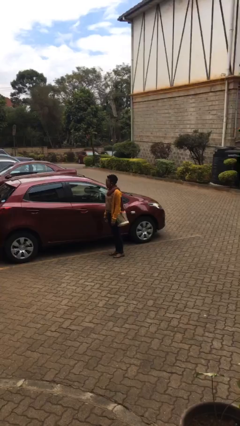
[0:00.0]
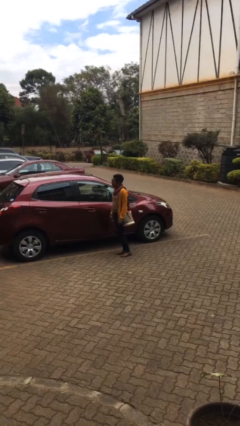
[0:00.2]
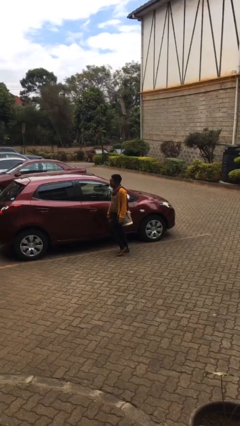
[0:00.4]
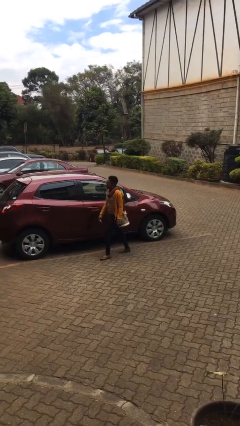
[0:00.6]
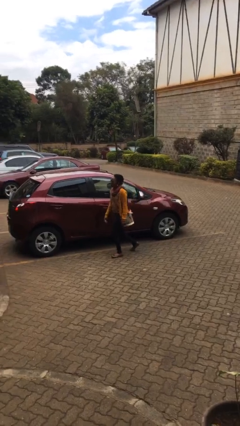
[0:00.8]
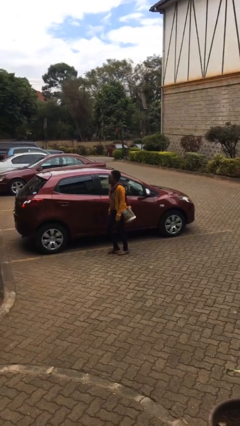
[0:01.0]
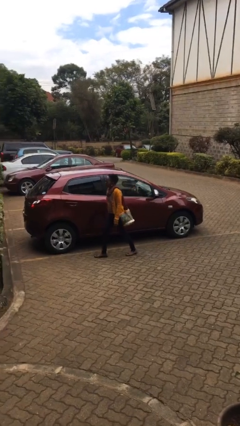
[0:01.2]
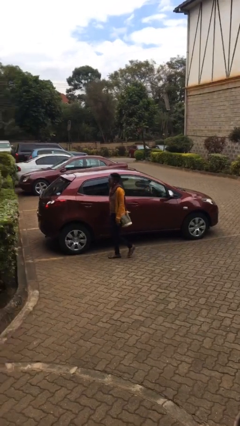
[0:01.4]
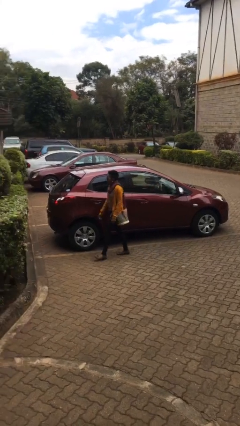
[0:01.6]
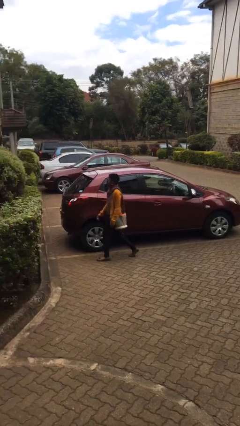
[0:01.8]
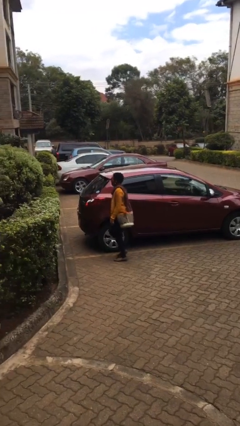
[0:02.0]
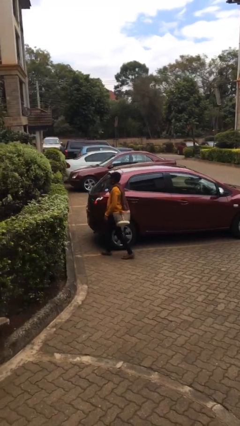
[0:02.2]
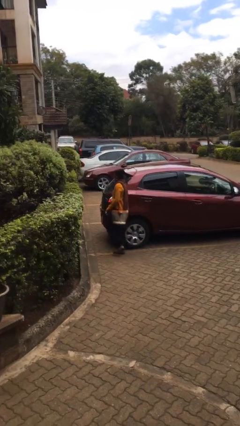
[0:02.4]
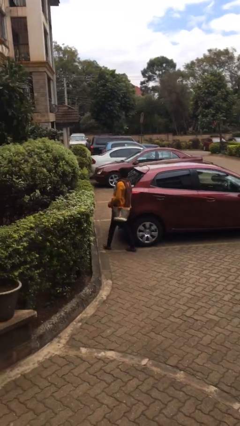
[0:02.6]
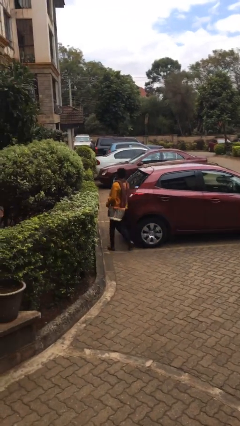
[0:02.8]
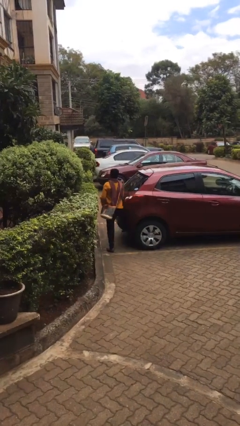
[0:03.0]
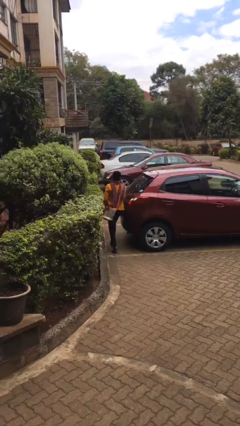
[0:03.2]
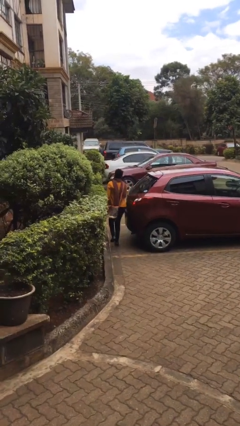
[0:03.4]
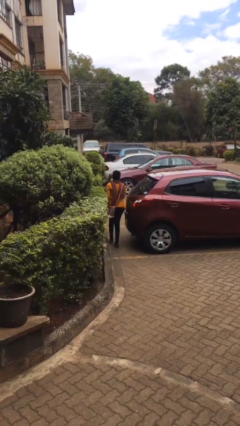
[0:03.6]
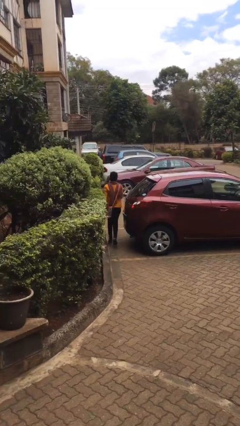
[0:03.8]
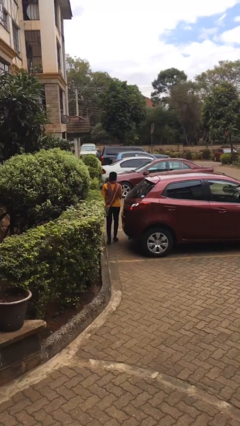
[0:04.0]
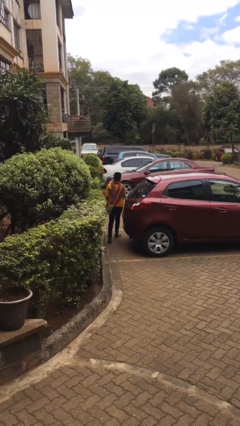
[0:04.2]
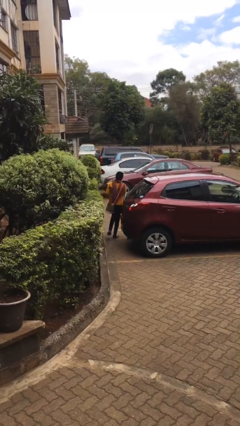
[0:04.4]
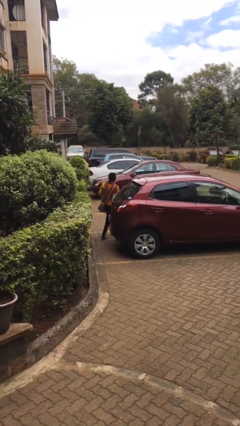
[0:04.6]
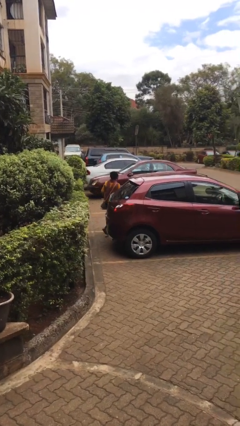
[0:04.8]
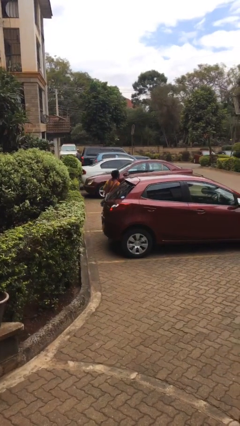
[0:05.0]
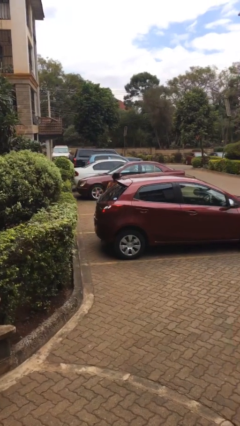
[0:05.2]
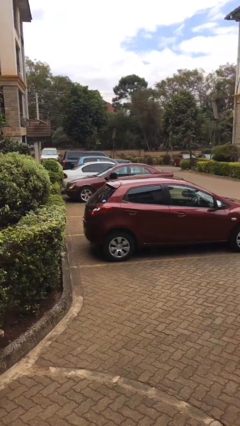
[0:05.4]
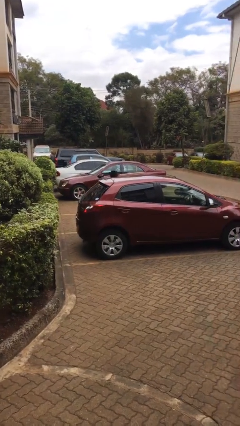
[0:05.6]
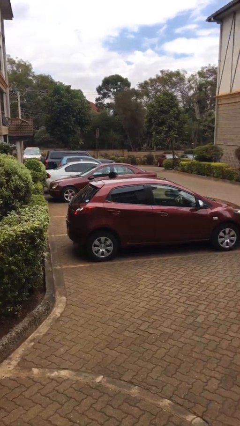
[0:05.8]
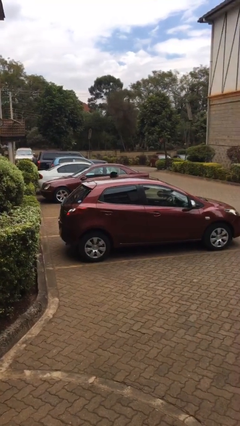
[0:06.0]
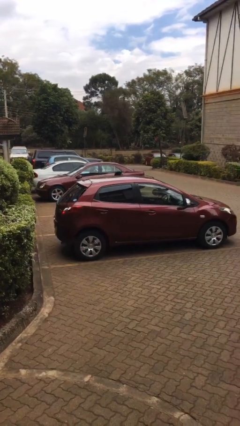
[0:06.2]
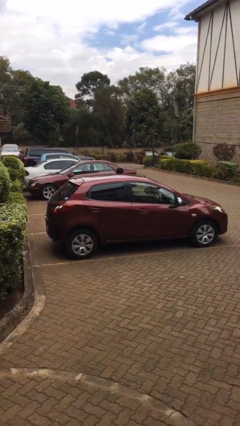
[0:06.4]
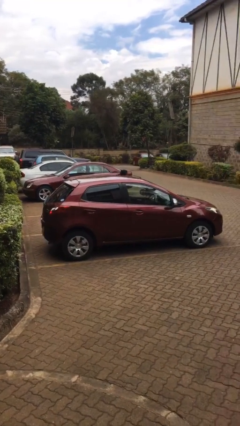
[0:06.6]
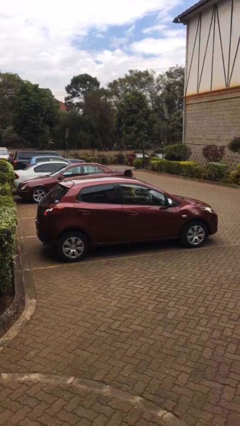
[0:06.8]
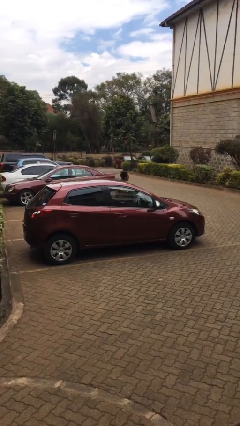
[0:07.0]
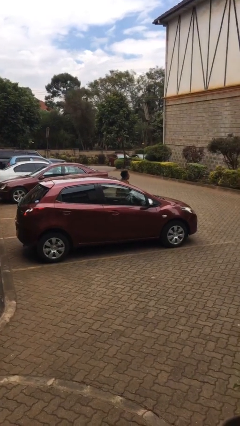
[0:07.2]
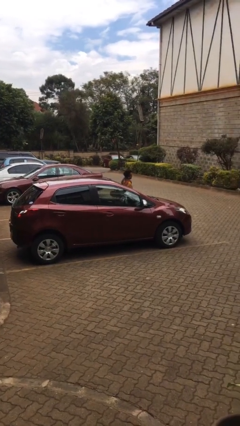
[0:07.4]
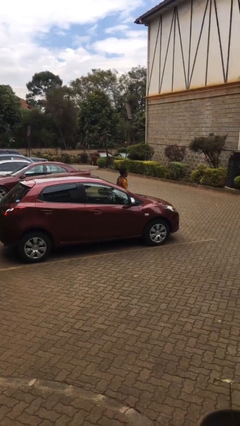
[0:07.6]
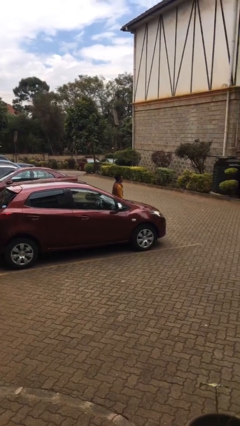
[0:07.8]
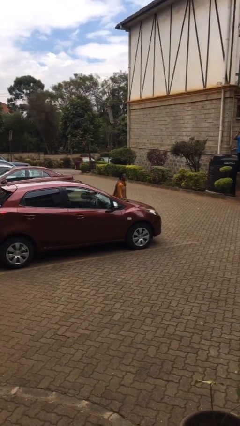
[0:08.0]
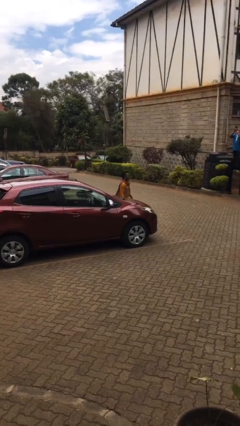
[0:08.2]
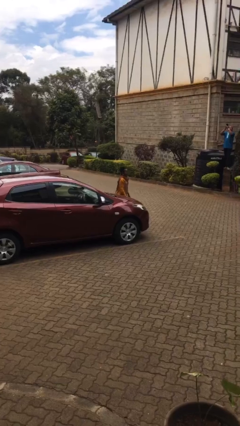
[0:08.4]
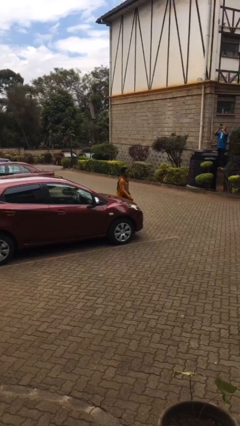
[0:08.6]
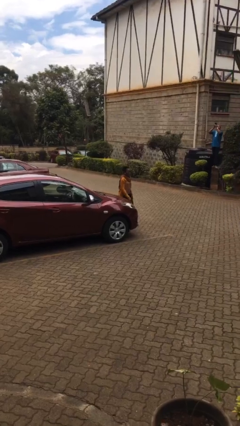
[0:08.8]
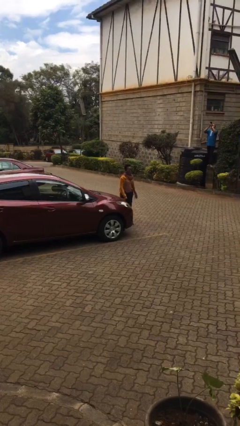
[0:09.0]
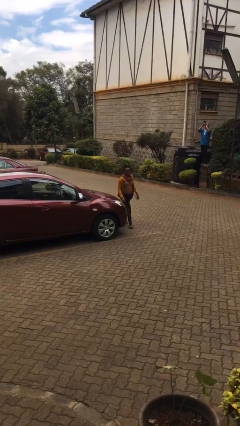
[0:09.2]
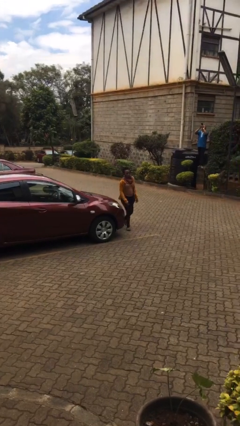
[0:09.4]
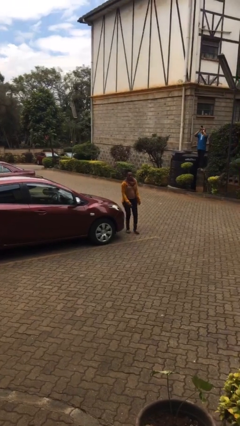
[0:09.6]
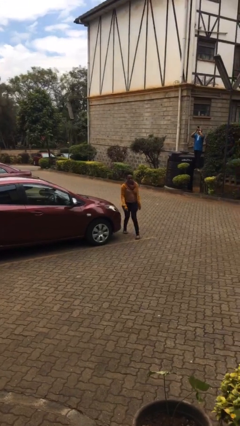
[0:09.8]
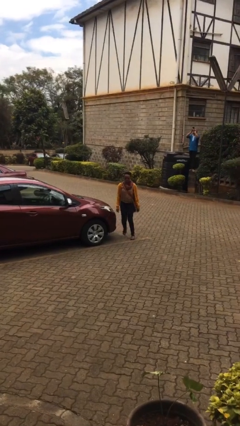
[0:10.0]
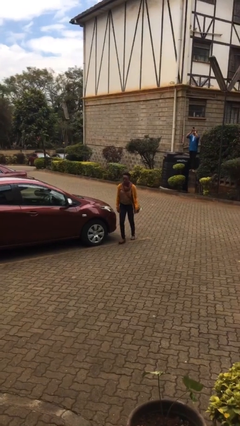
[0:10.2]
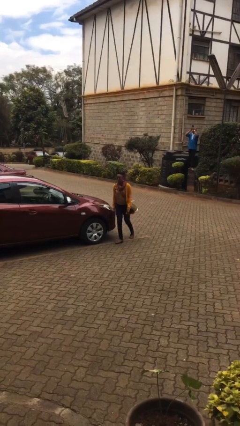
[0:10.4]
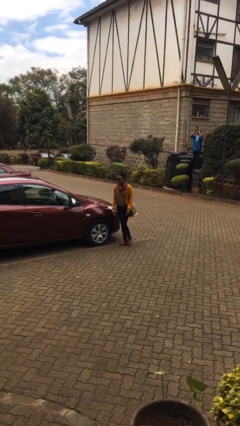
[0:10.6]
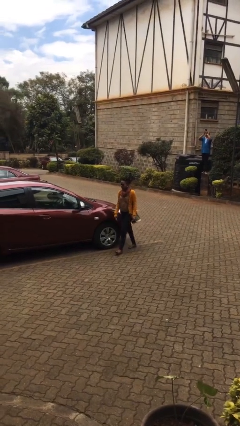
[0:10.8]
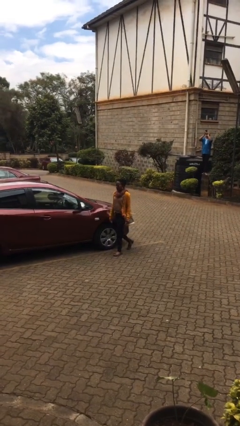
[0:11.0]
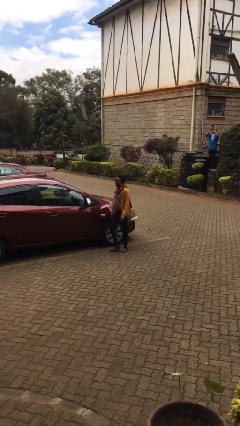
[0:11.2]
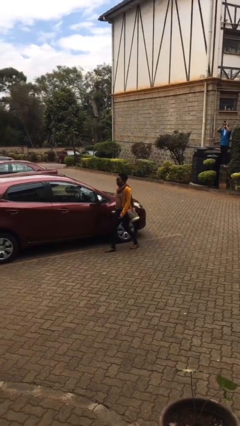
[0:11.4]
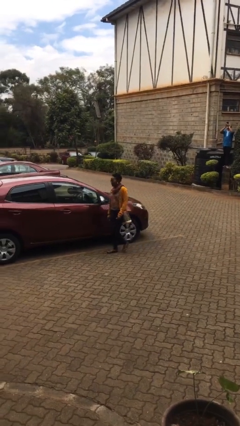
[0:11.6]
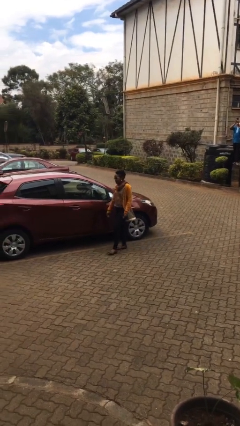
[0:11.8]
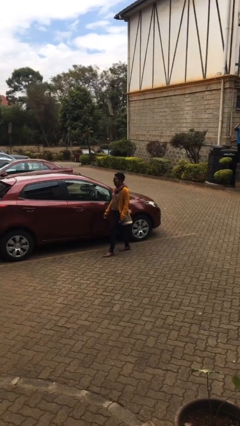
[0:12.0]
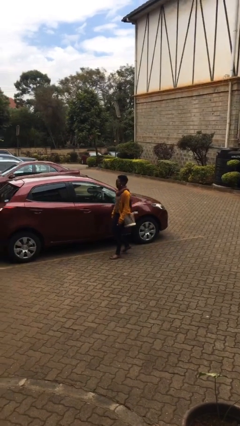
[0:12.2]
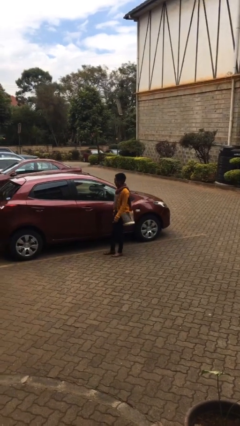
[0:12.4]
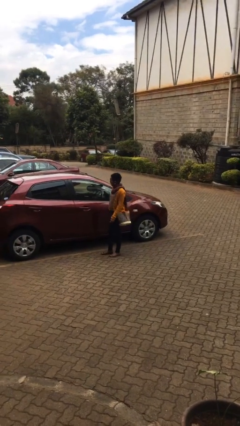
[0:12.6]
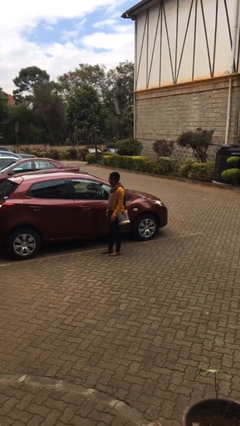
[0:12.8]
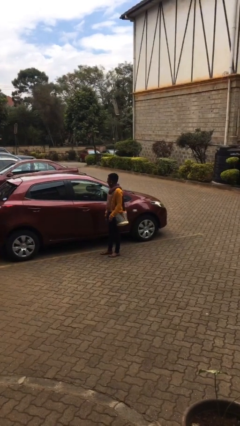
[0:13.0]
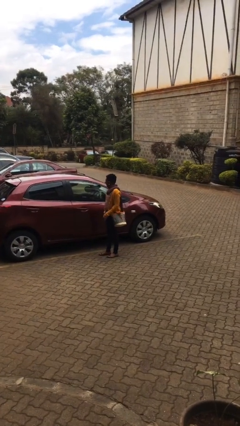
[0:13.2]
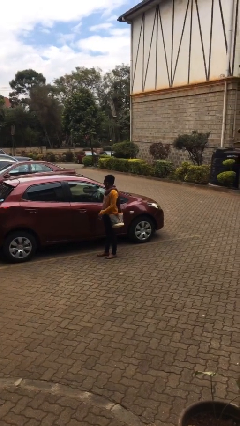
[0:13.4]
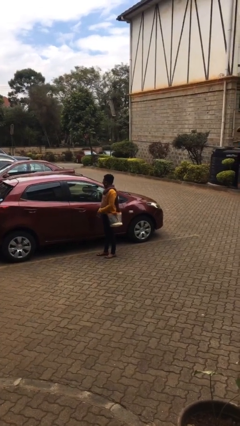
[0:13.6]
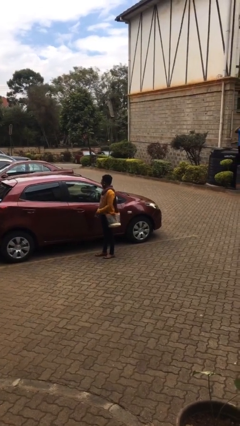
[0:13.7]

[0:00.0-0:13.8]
person walks around car

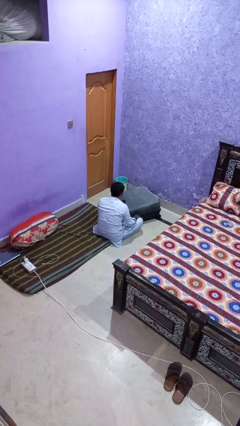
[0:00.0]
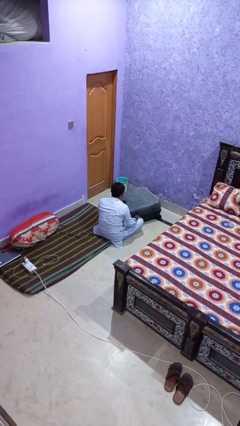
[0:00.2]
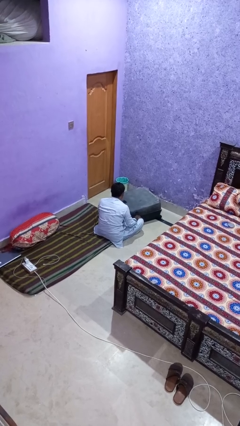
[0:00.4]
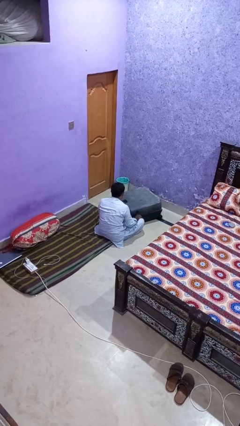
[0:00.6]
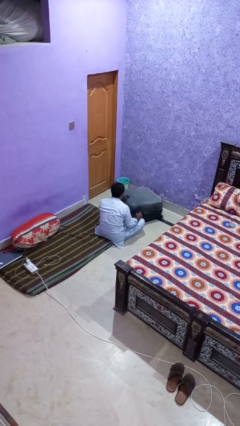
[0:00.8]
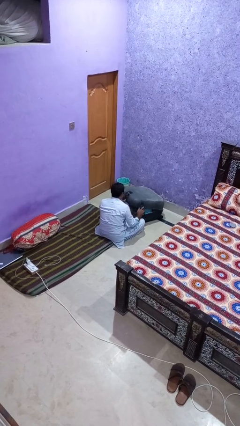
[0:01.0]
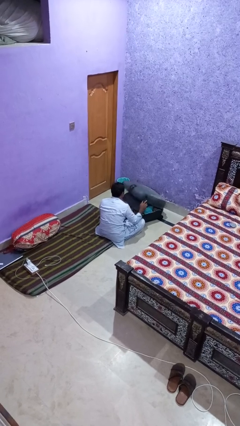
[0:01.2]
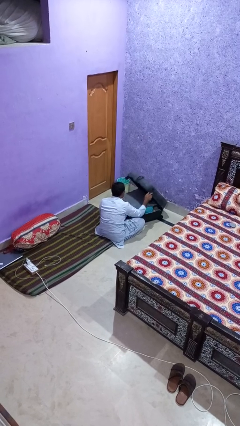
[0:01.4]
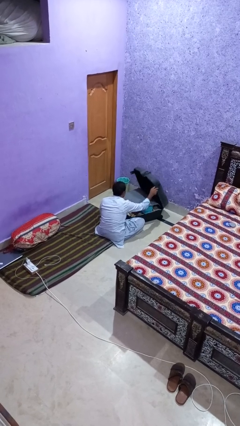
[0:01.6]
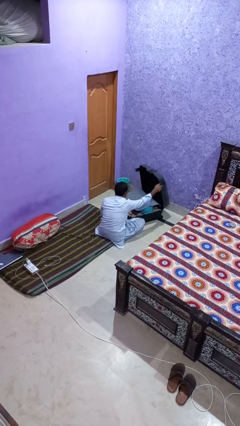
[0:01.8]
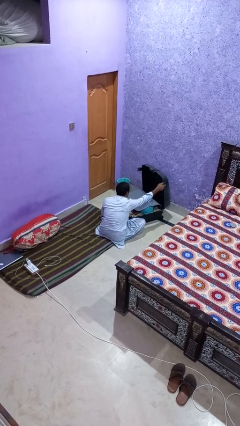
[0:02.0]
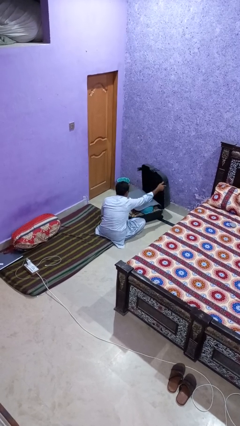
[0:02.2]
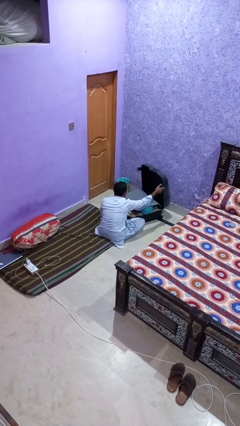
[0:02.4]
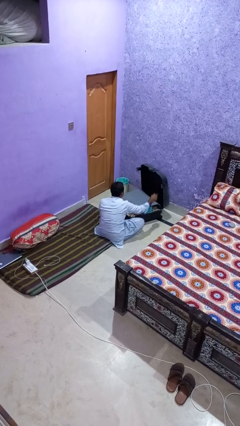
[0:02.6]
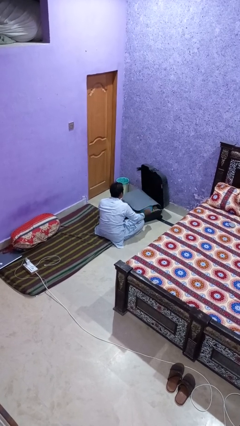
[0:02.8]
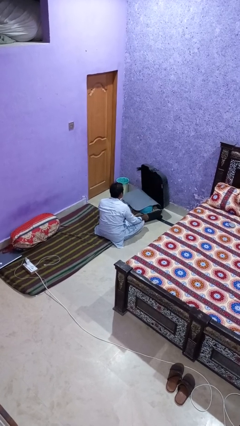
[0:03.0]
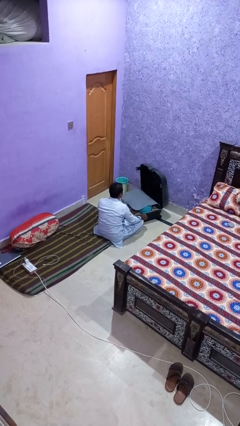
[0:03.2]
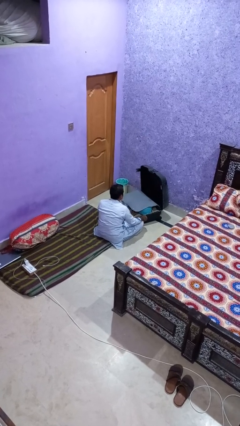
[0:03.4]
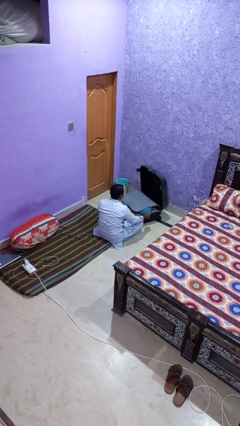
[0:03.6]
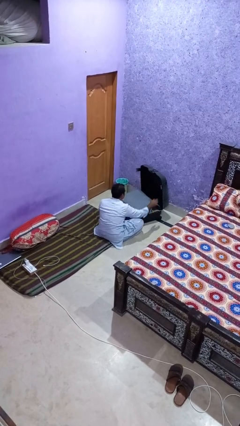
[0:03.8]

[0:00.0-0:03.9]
person opens suitcase

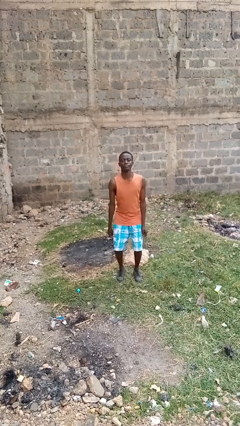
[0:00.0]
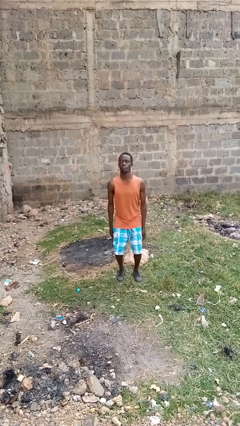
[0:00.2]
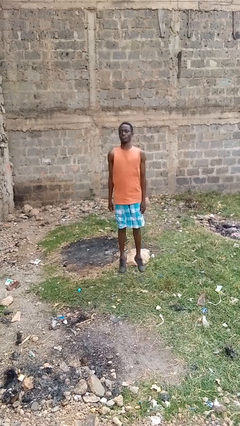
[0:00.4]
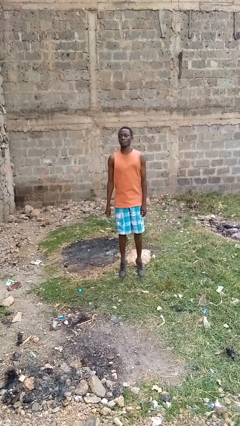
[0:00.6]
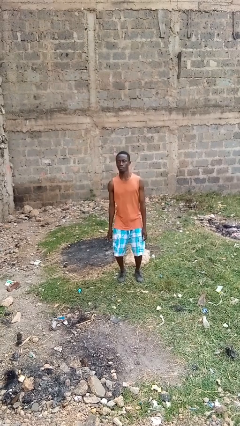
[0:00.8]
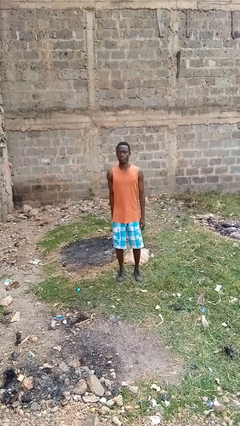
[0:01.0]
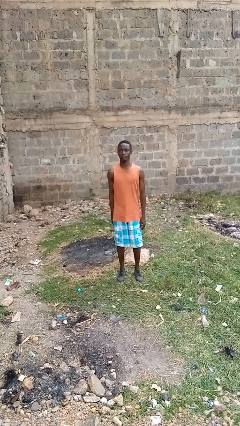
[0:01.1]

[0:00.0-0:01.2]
person jumps
